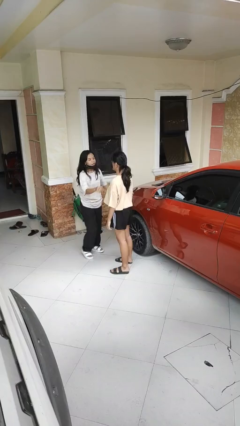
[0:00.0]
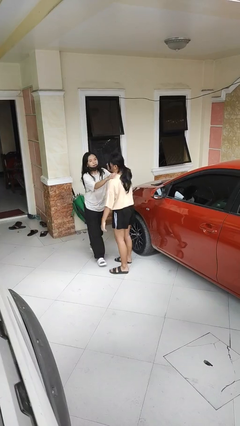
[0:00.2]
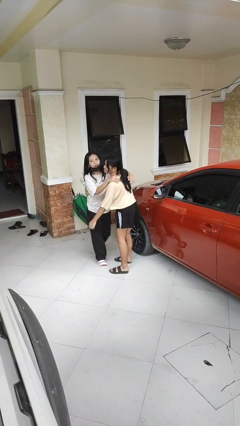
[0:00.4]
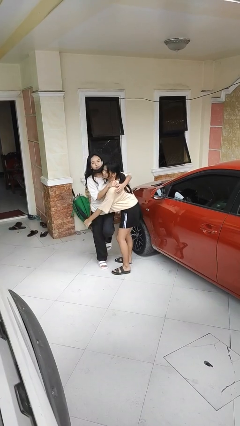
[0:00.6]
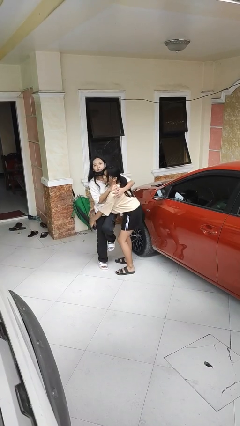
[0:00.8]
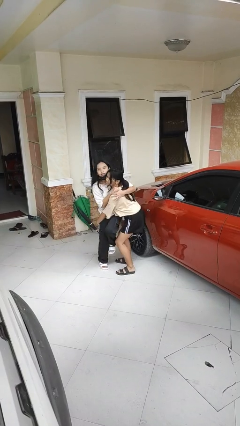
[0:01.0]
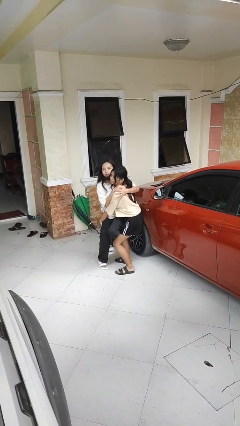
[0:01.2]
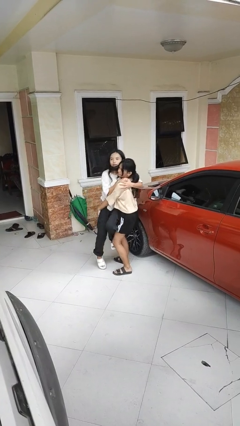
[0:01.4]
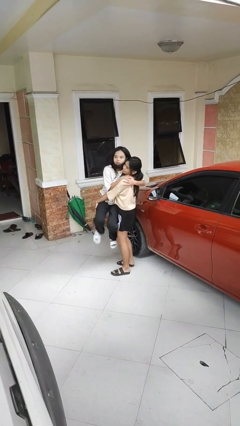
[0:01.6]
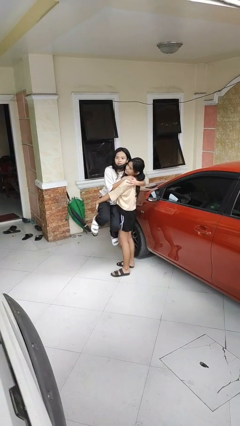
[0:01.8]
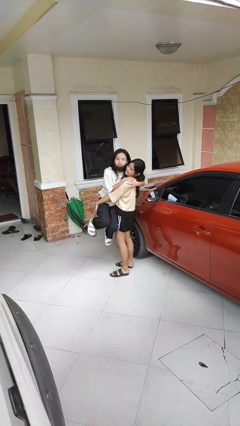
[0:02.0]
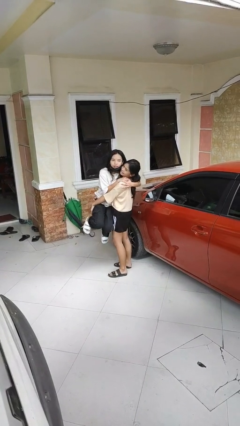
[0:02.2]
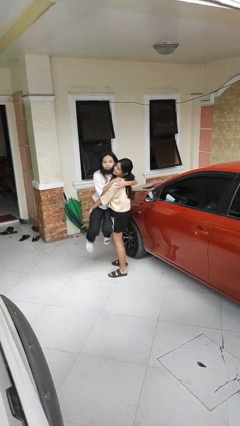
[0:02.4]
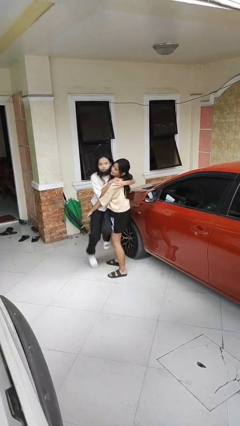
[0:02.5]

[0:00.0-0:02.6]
person picks up person

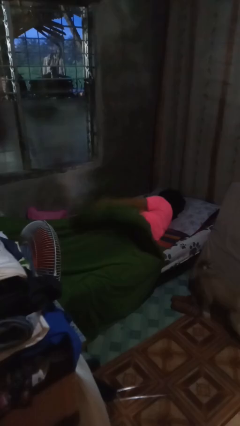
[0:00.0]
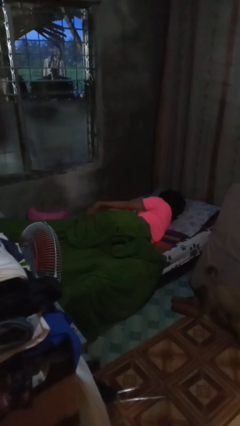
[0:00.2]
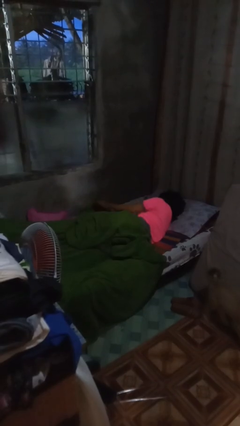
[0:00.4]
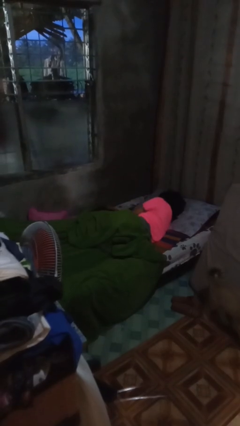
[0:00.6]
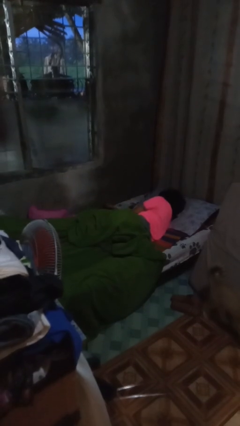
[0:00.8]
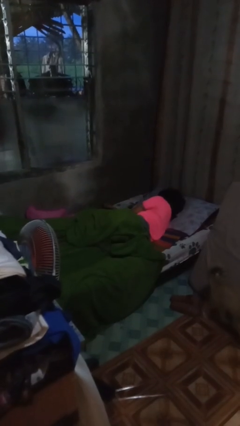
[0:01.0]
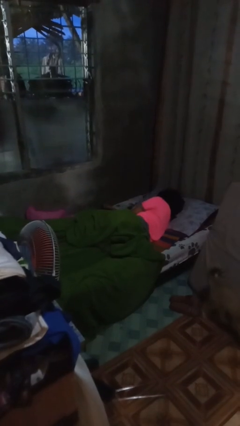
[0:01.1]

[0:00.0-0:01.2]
person uncovers with bedsheets

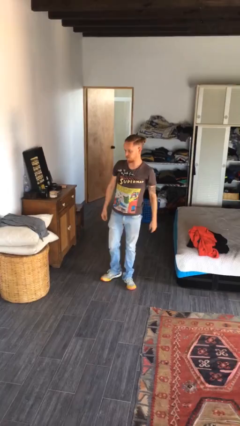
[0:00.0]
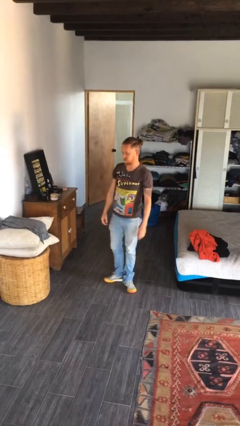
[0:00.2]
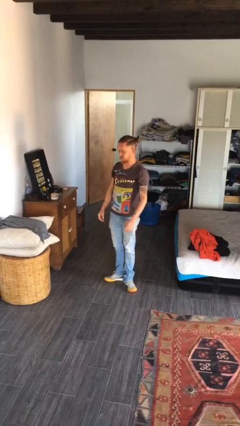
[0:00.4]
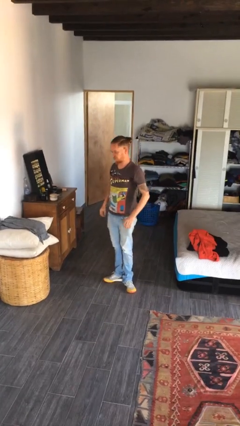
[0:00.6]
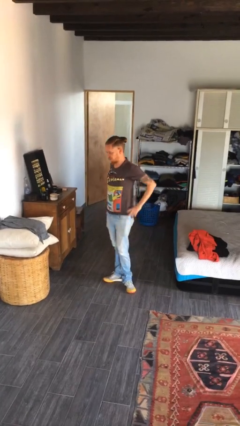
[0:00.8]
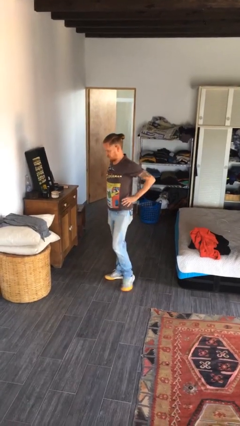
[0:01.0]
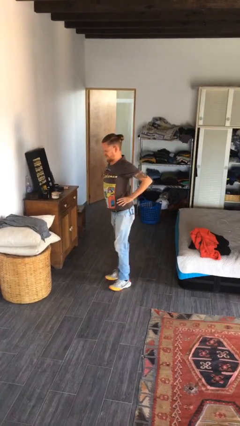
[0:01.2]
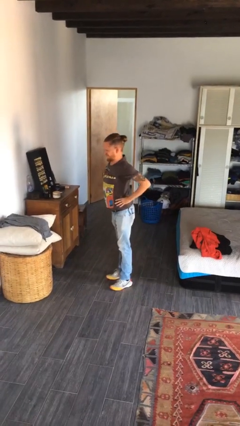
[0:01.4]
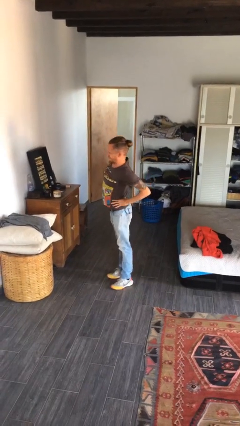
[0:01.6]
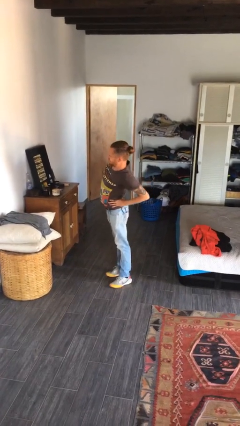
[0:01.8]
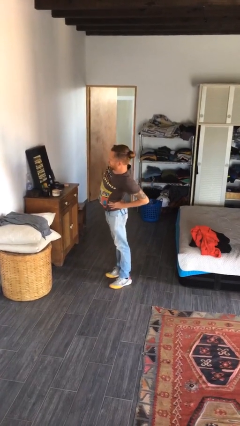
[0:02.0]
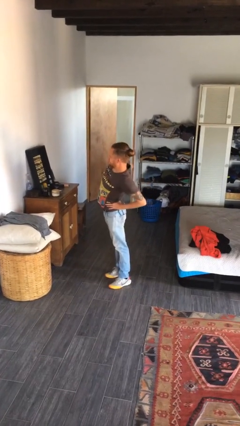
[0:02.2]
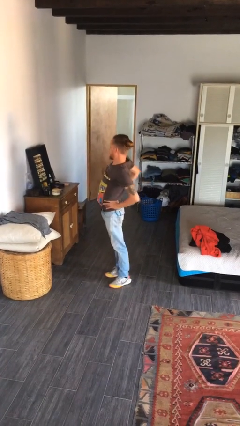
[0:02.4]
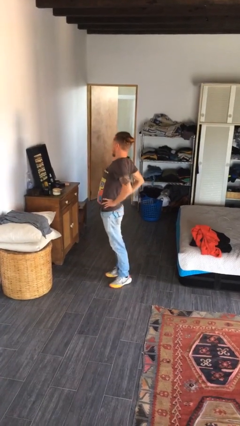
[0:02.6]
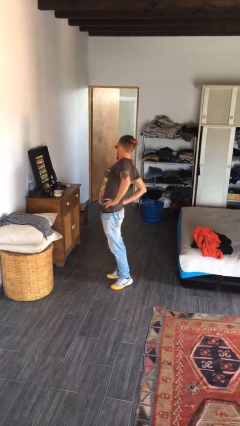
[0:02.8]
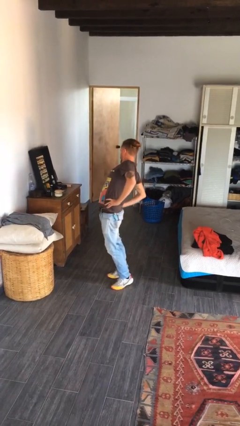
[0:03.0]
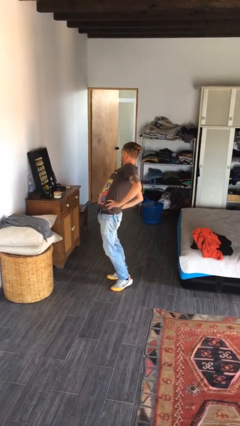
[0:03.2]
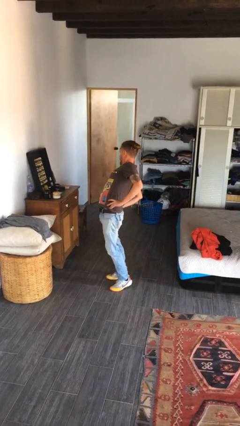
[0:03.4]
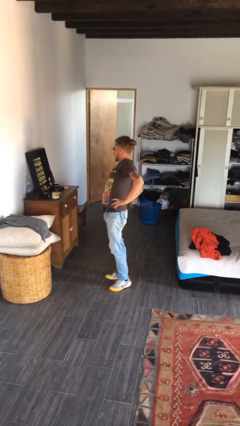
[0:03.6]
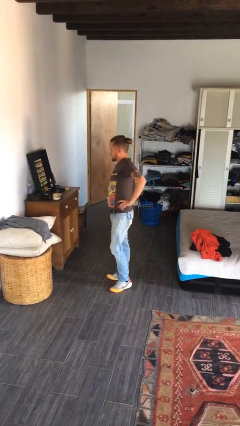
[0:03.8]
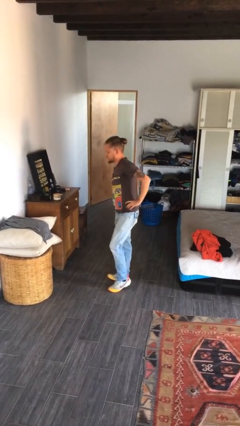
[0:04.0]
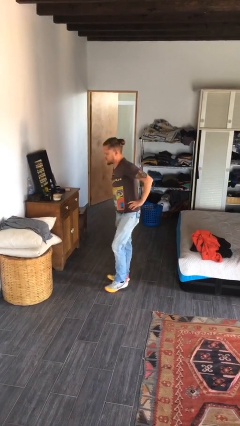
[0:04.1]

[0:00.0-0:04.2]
person stretches back

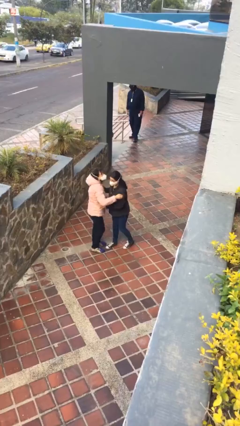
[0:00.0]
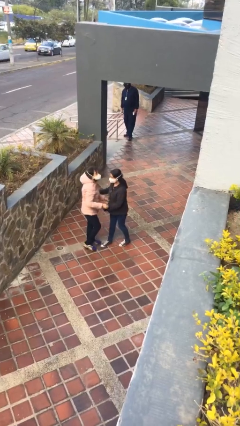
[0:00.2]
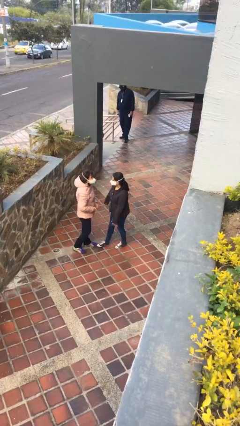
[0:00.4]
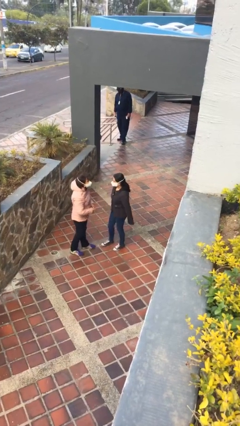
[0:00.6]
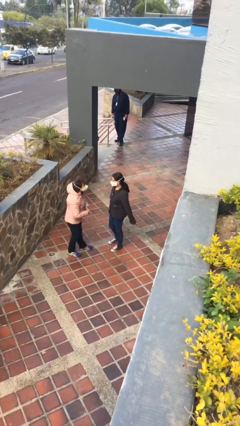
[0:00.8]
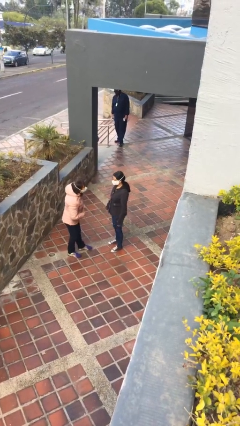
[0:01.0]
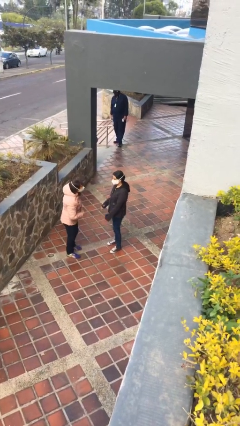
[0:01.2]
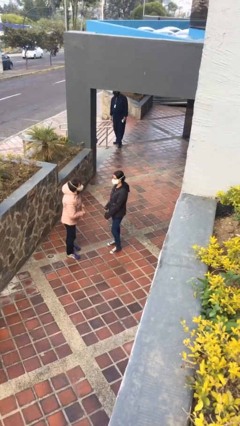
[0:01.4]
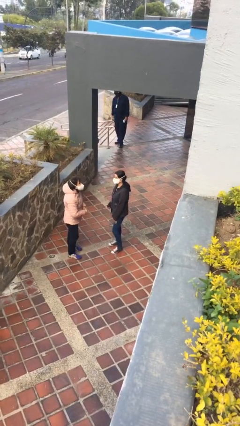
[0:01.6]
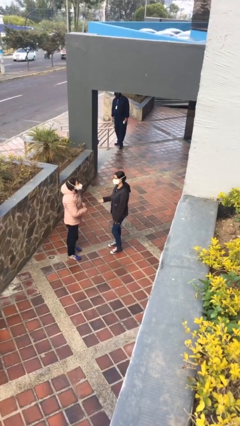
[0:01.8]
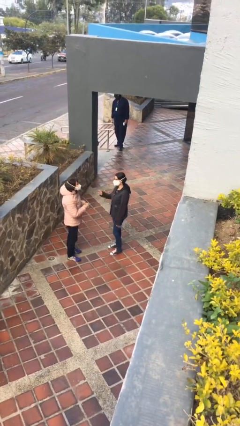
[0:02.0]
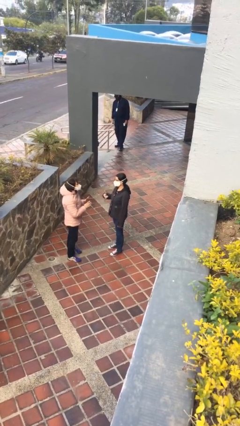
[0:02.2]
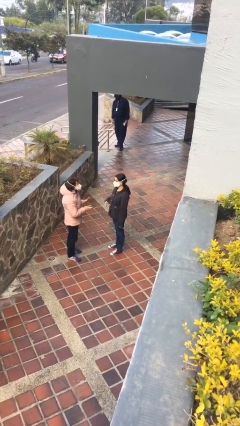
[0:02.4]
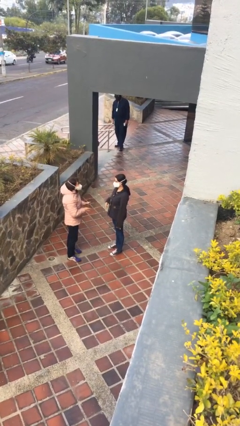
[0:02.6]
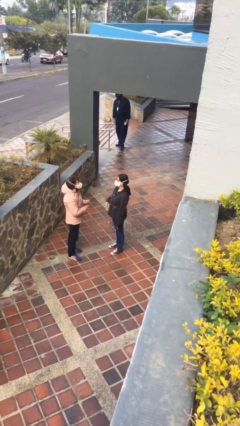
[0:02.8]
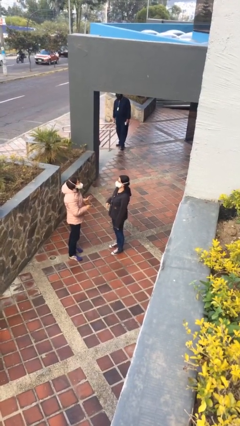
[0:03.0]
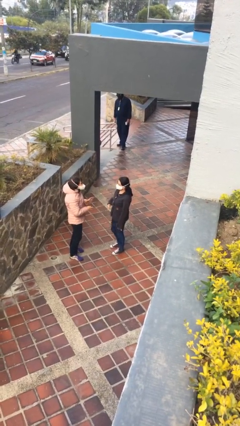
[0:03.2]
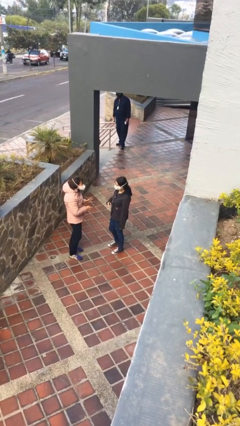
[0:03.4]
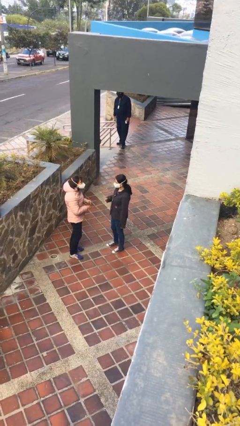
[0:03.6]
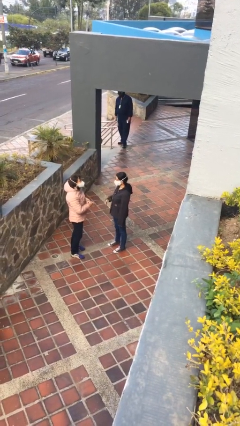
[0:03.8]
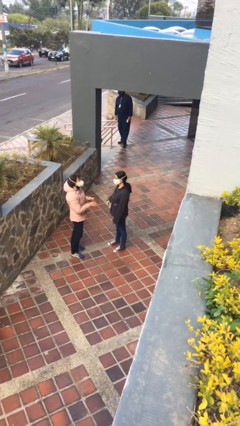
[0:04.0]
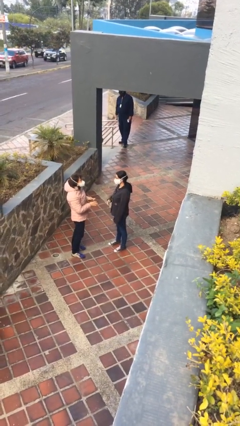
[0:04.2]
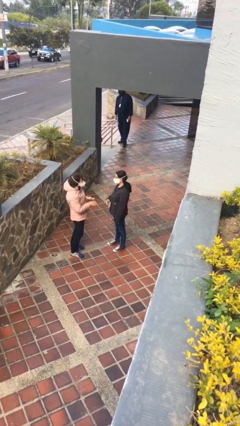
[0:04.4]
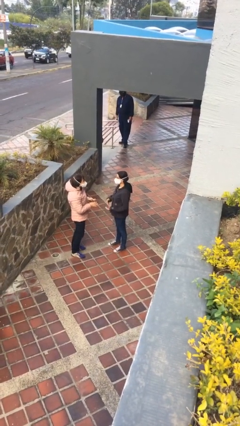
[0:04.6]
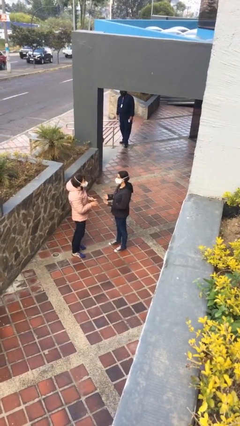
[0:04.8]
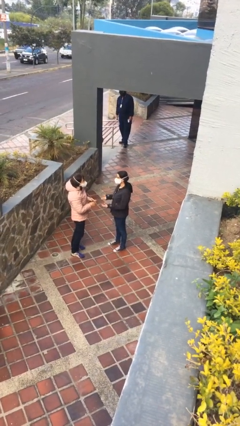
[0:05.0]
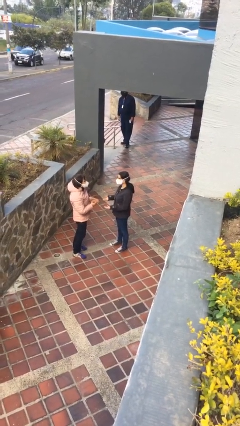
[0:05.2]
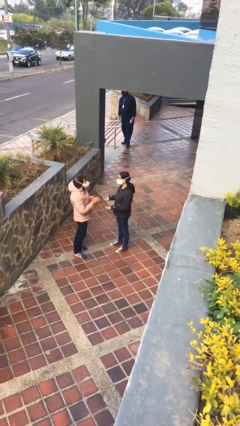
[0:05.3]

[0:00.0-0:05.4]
person talks to person

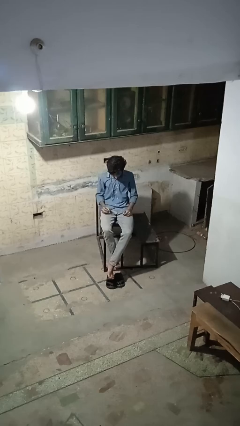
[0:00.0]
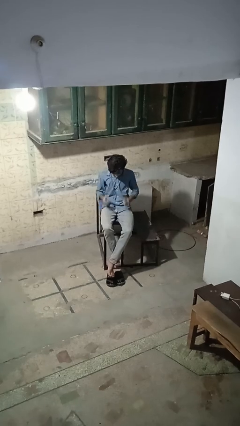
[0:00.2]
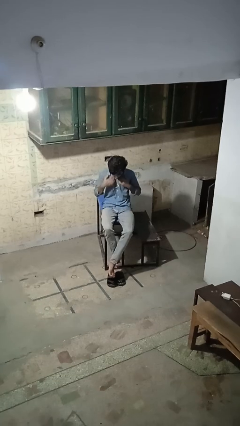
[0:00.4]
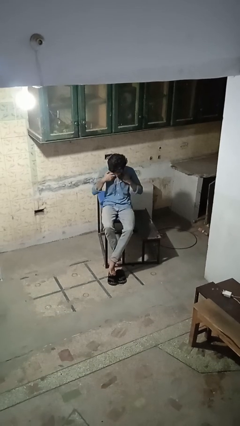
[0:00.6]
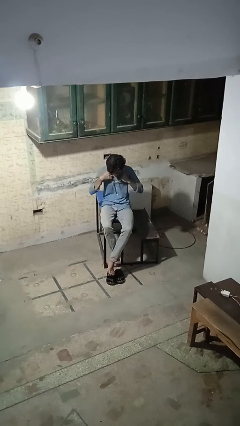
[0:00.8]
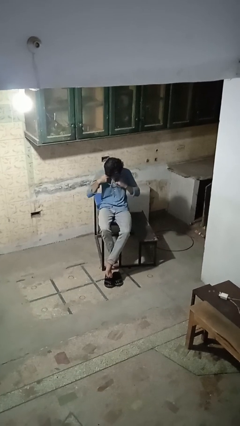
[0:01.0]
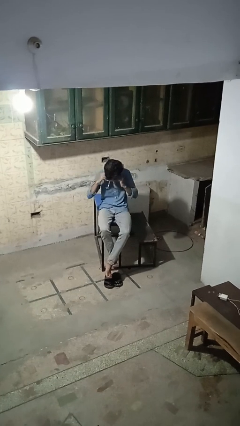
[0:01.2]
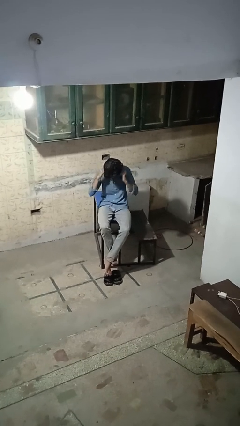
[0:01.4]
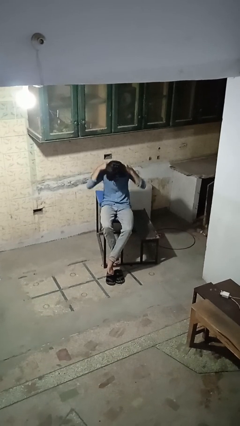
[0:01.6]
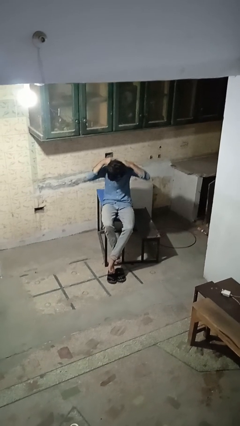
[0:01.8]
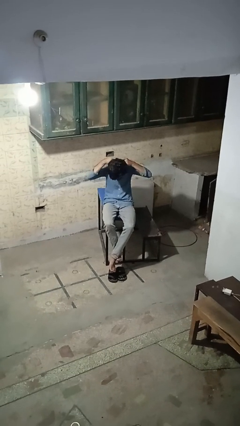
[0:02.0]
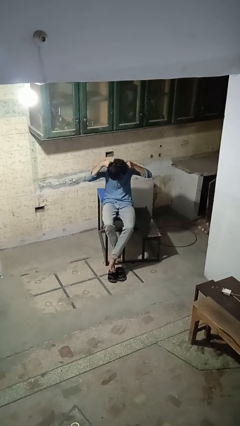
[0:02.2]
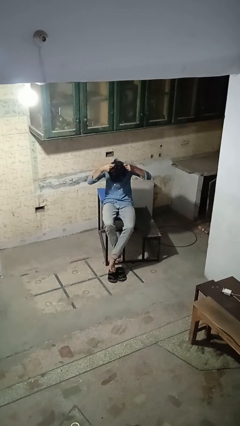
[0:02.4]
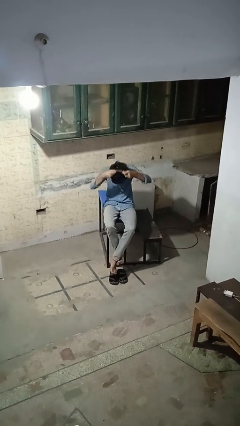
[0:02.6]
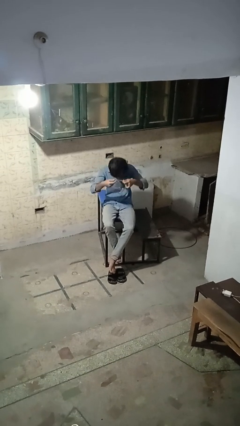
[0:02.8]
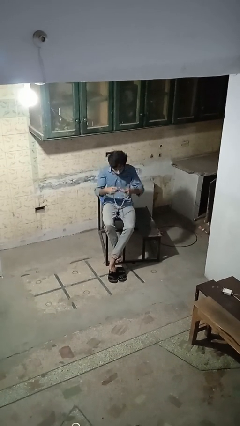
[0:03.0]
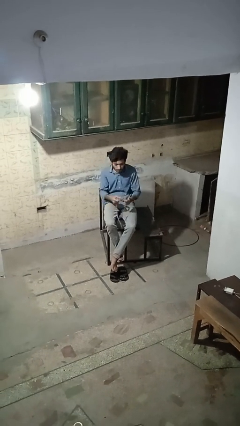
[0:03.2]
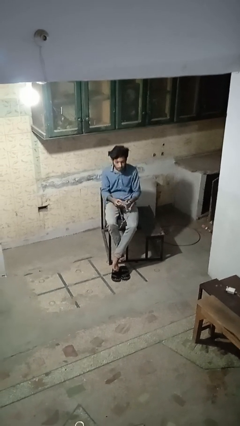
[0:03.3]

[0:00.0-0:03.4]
person takes off necklace

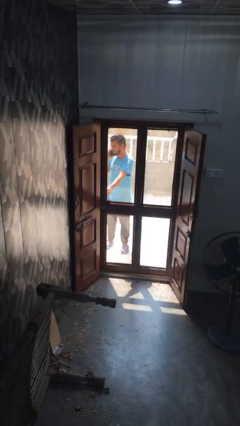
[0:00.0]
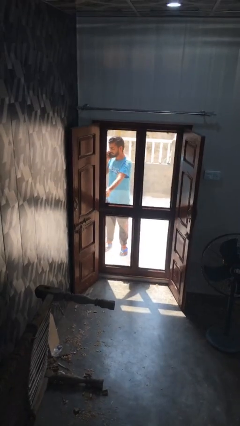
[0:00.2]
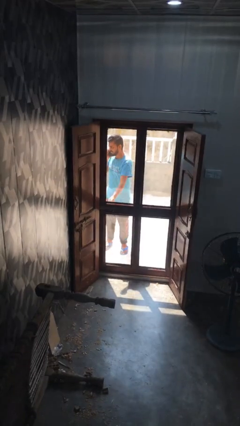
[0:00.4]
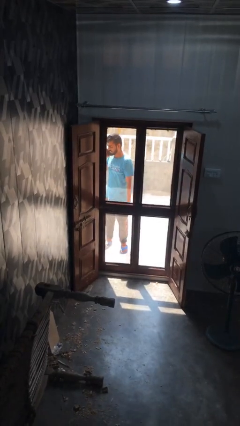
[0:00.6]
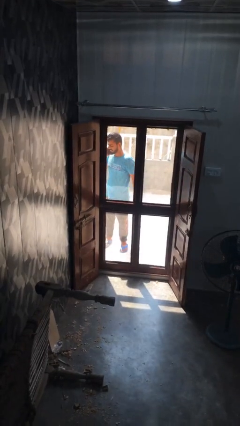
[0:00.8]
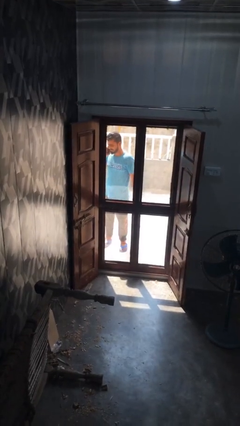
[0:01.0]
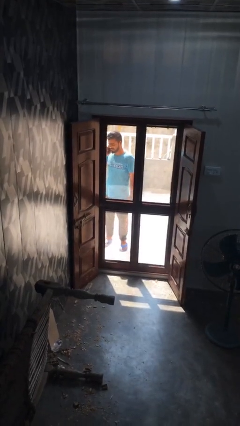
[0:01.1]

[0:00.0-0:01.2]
person closes facility door
